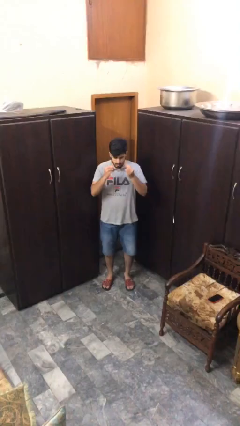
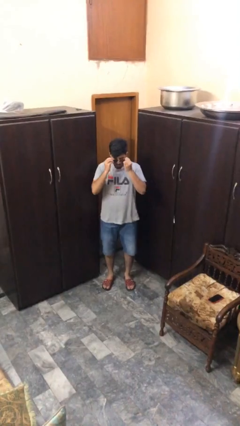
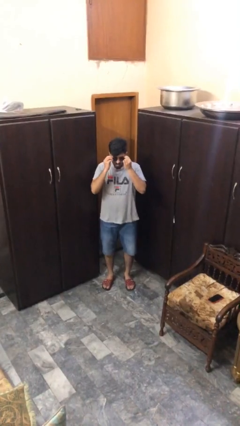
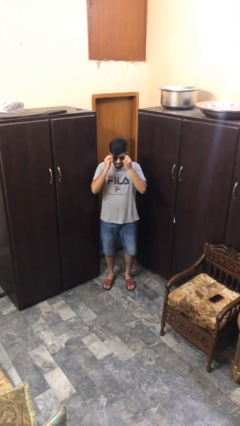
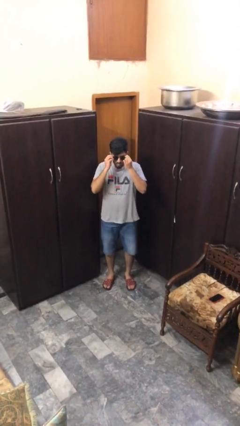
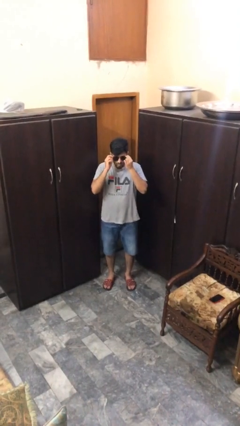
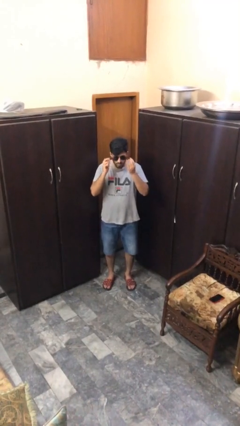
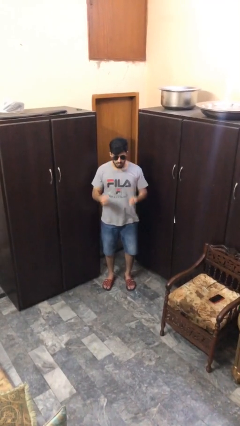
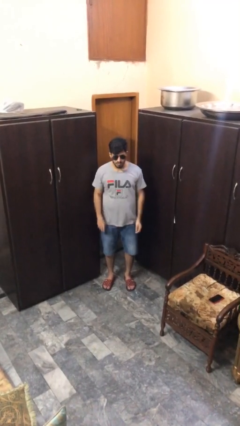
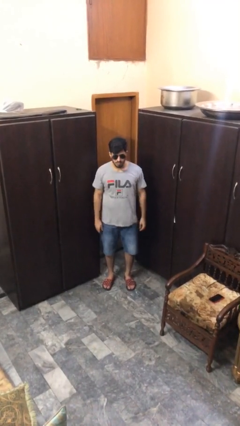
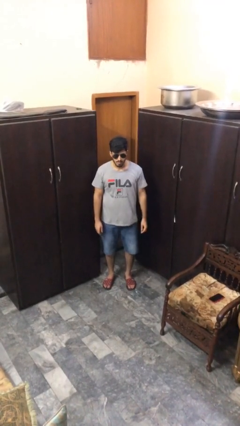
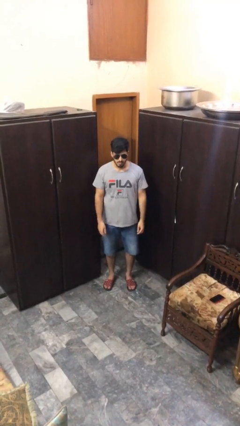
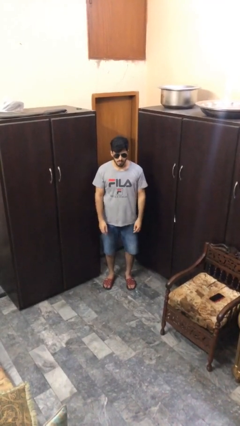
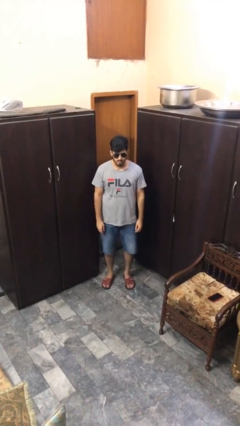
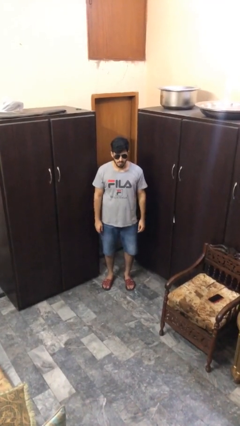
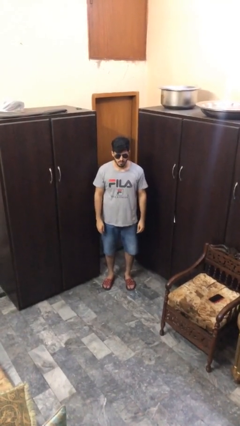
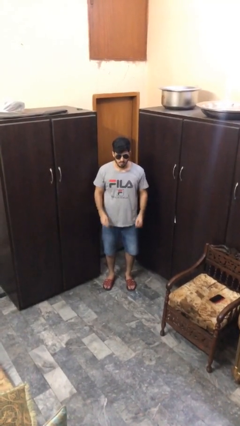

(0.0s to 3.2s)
person puts on sunglasses

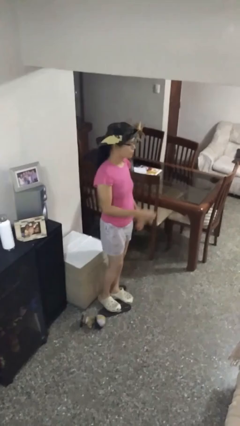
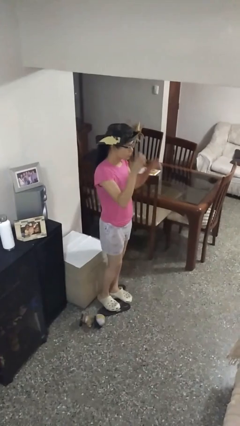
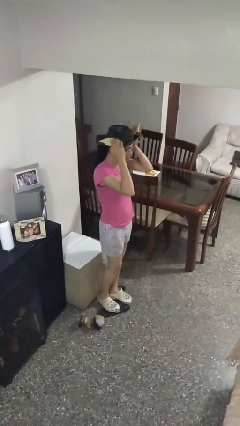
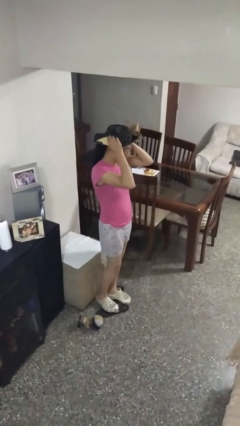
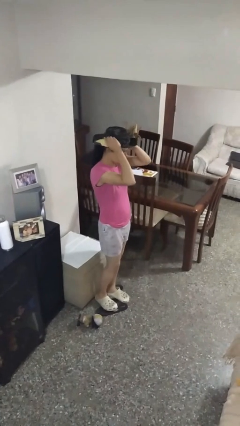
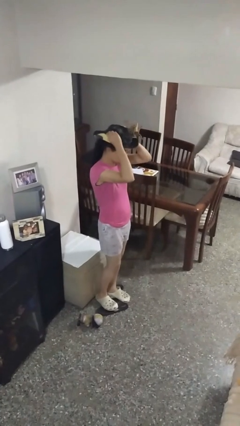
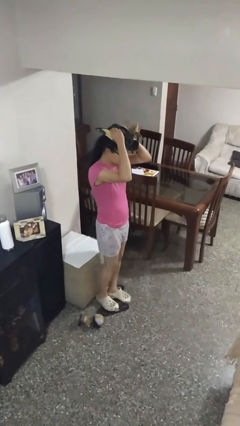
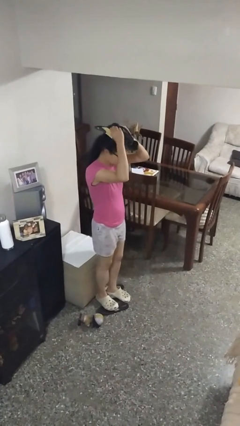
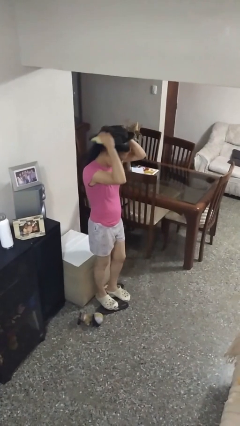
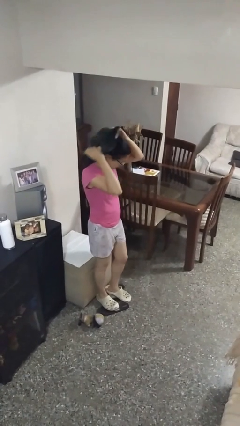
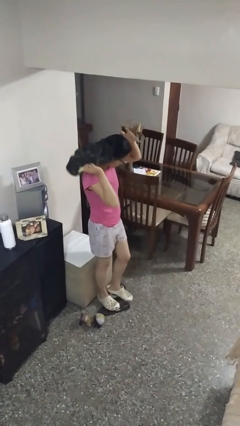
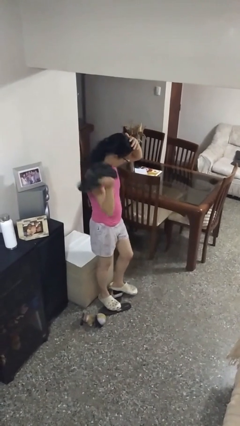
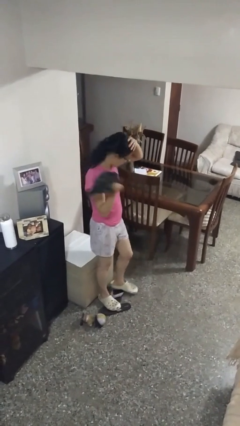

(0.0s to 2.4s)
person takes off hat

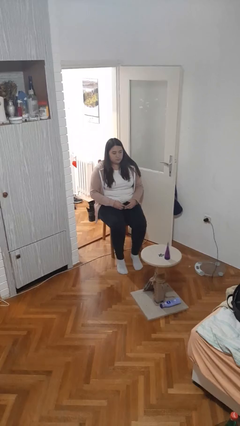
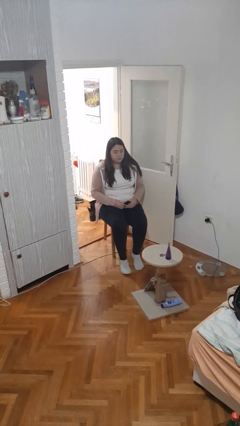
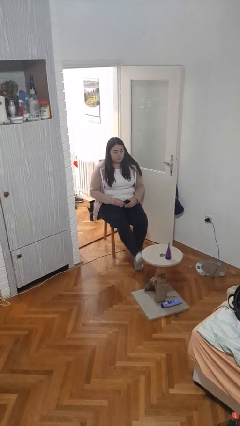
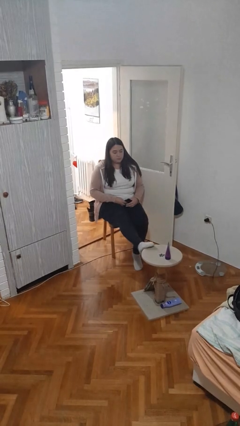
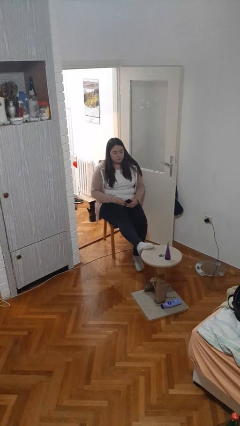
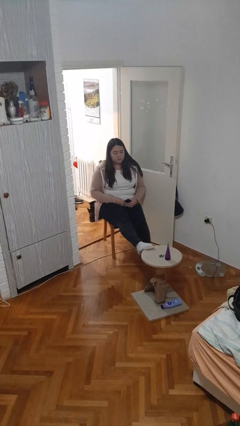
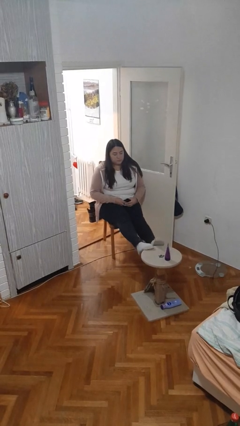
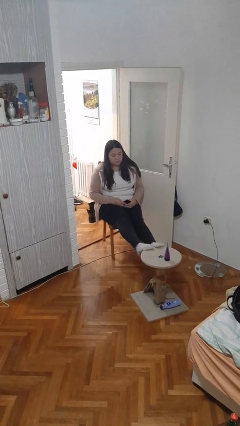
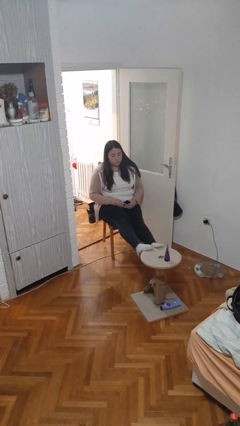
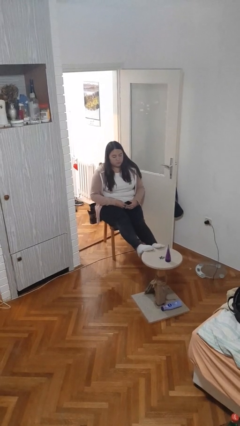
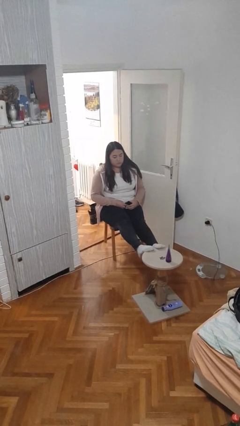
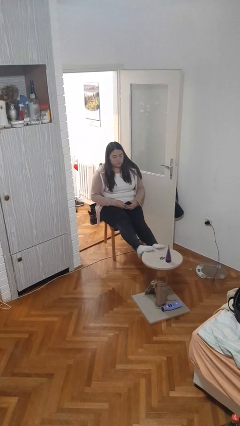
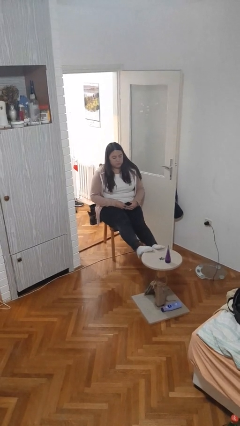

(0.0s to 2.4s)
person puts feet up

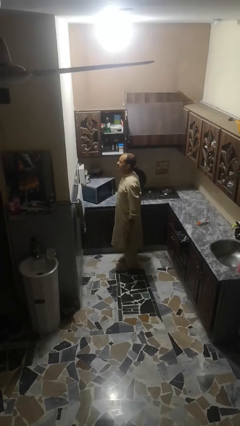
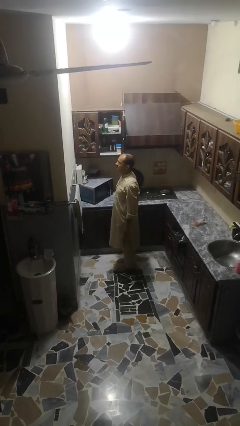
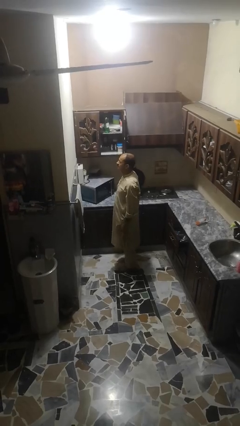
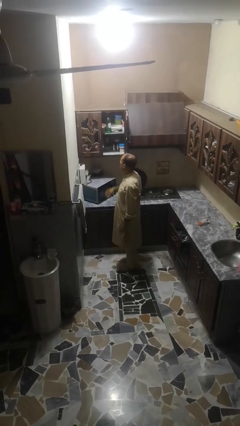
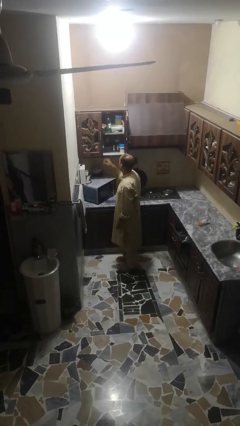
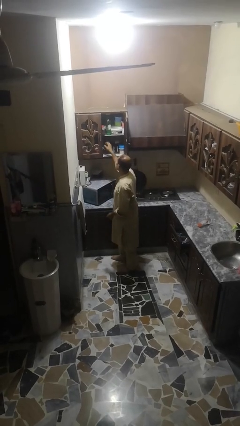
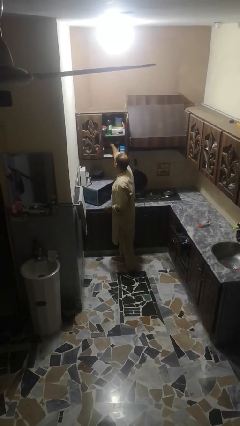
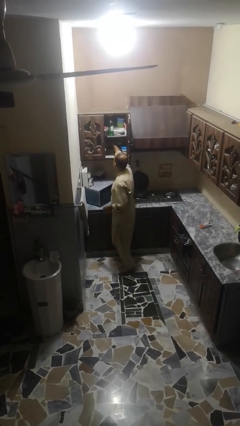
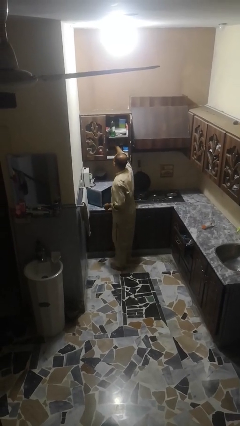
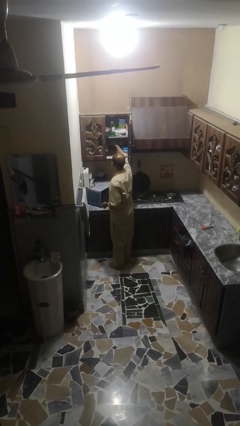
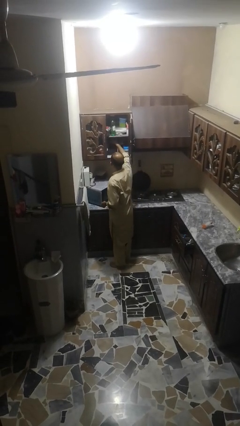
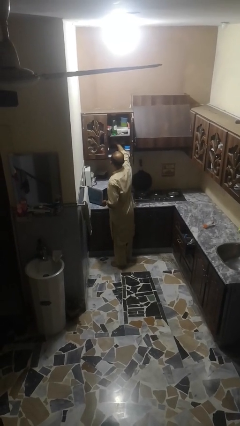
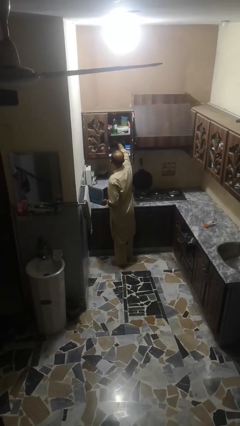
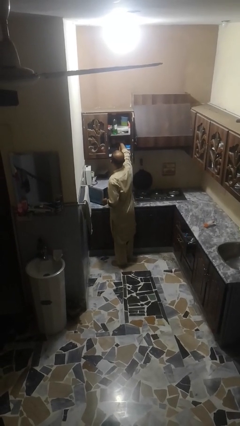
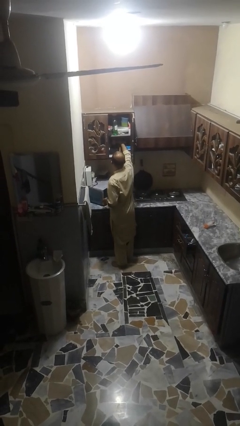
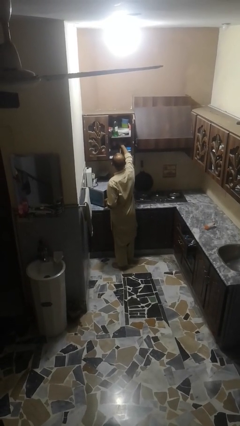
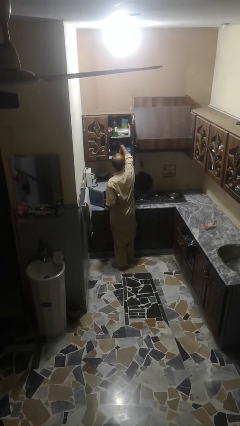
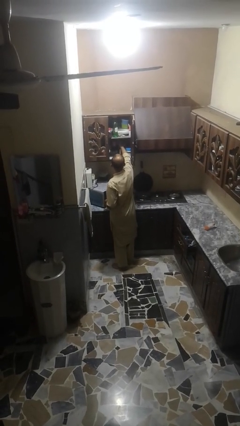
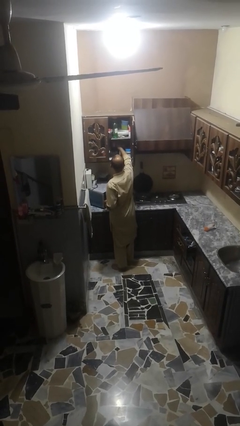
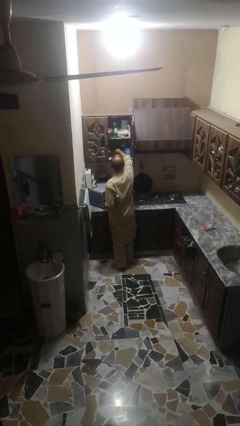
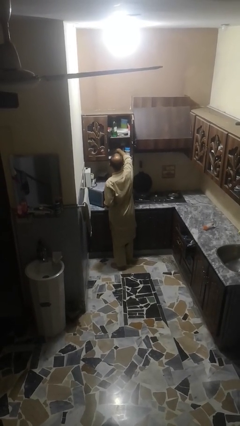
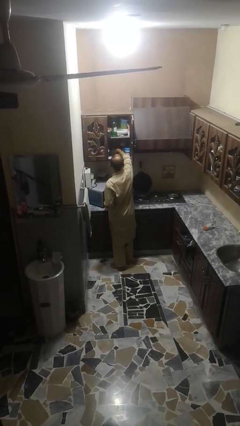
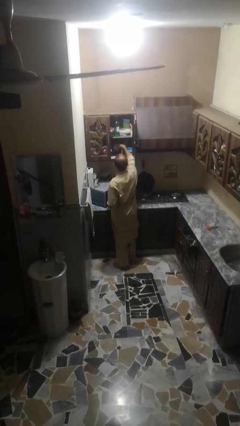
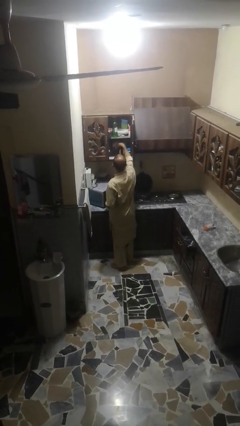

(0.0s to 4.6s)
person searches in cabinet

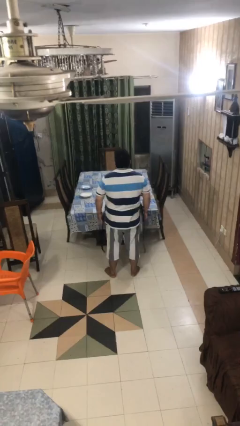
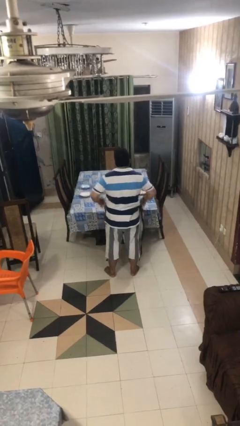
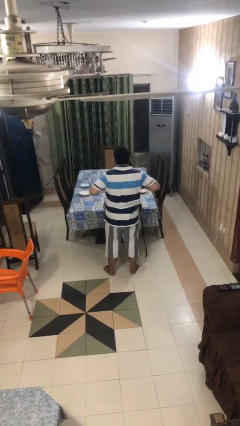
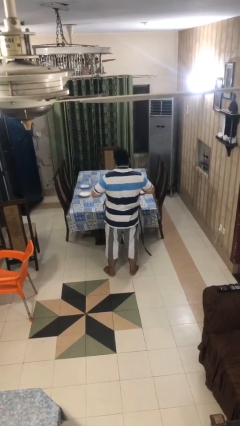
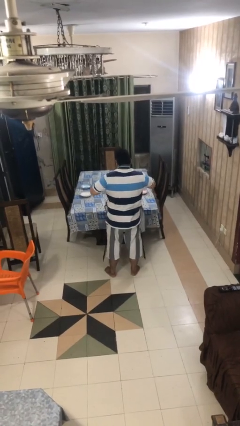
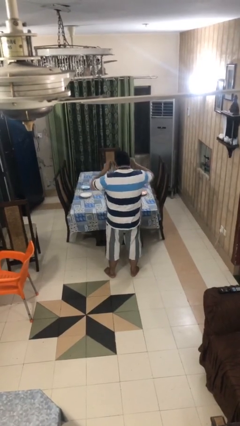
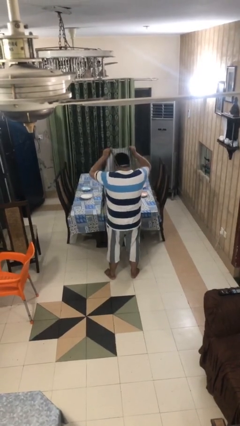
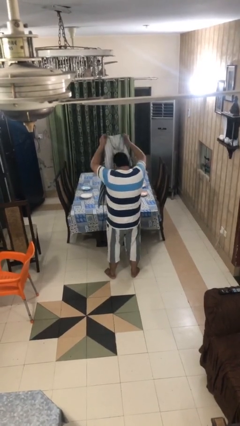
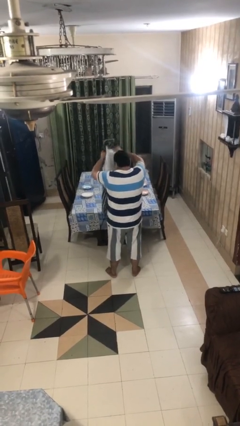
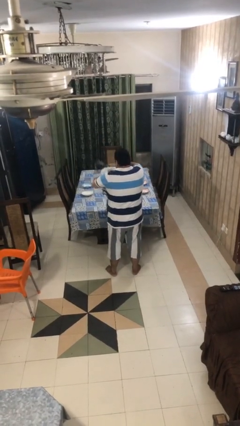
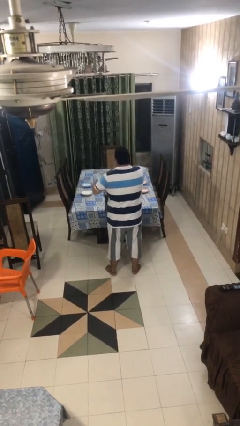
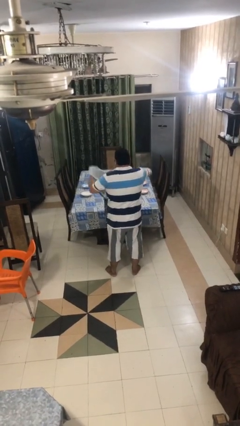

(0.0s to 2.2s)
person takes off apron

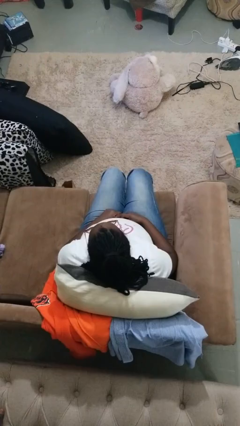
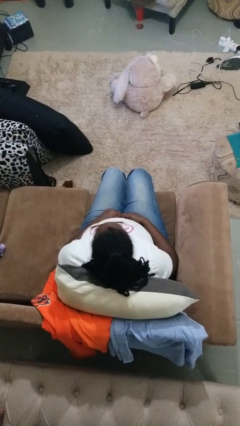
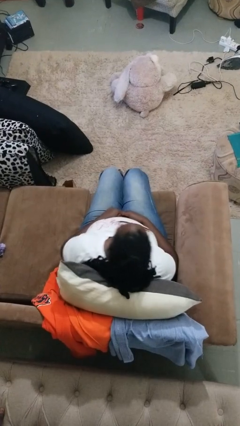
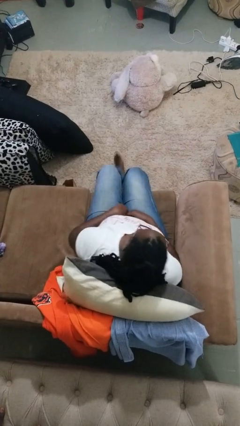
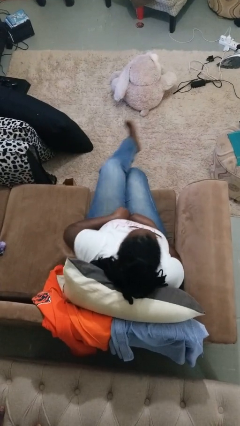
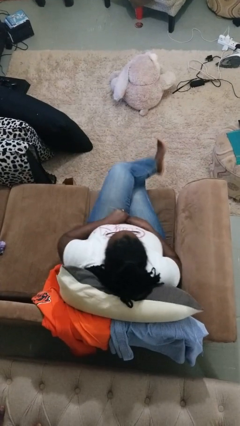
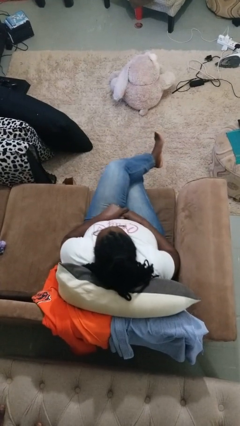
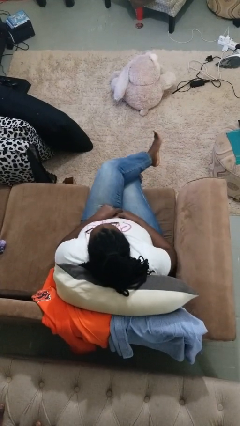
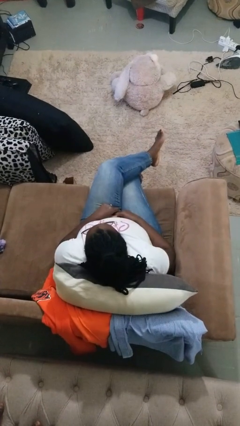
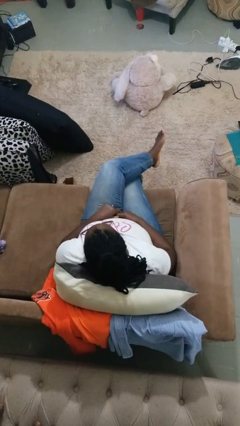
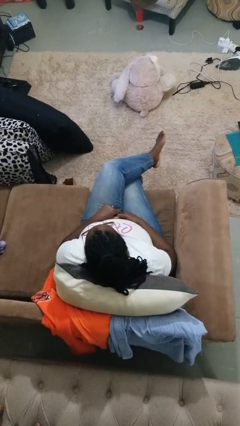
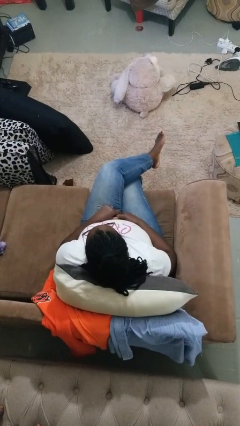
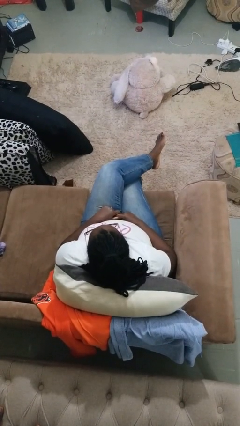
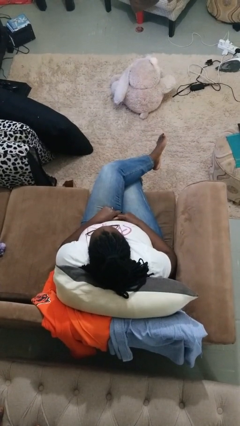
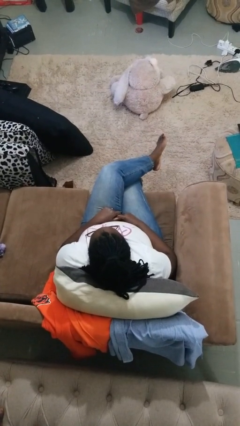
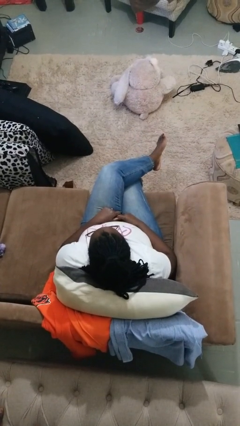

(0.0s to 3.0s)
person crosses legs
